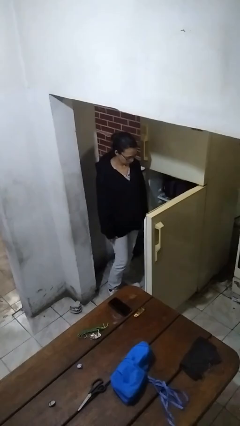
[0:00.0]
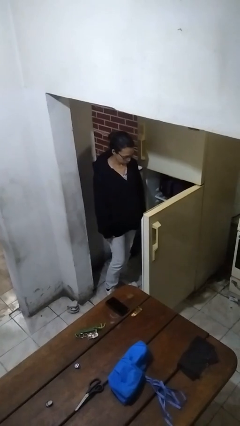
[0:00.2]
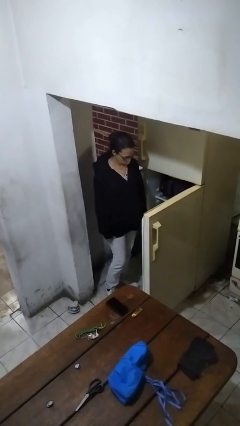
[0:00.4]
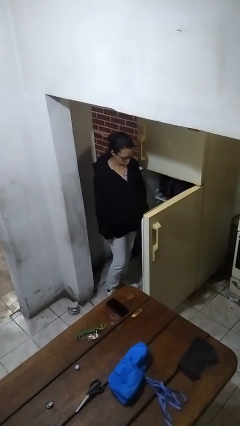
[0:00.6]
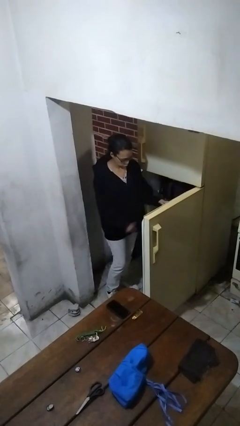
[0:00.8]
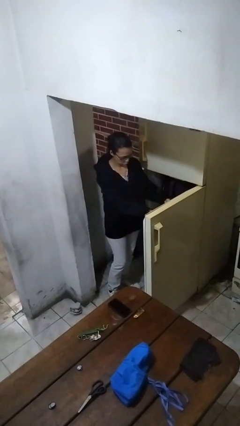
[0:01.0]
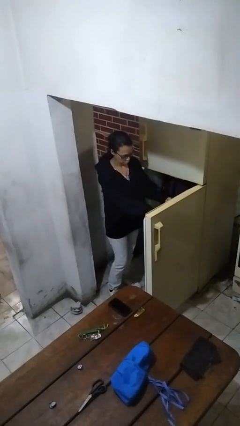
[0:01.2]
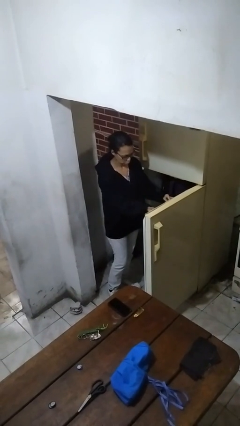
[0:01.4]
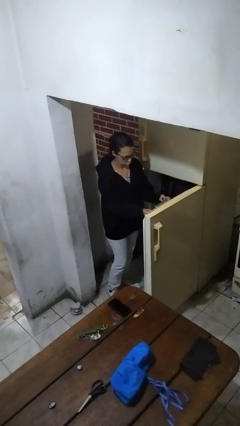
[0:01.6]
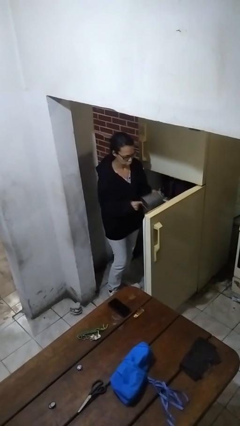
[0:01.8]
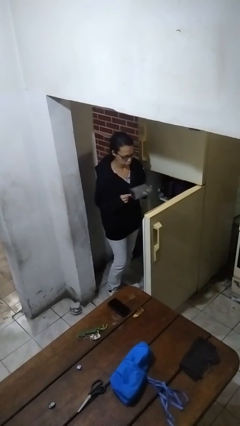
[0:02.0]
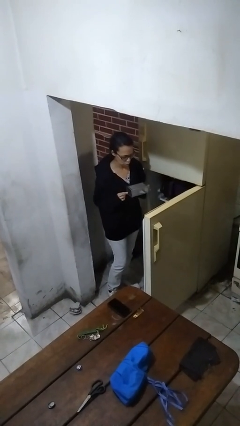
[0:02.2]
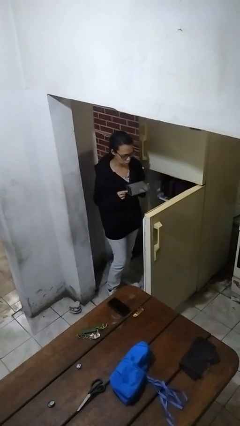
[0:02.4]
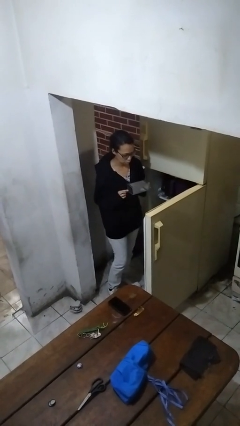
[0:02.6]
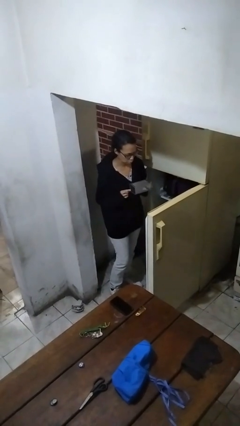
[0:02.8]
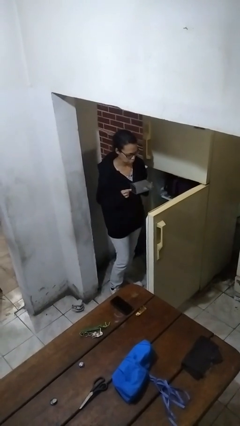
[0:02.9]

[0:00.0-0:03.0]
person takes object from refrigerator

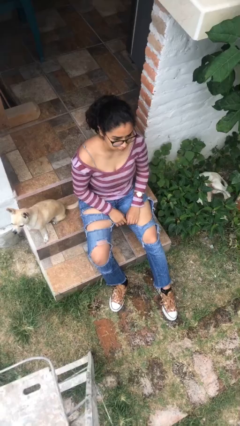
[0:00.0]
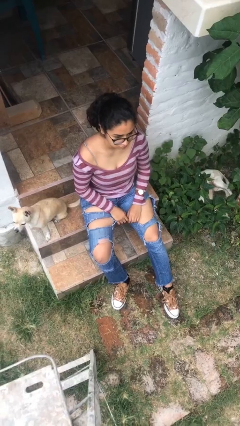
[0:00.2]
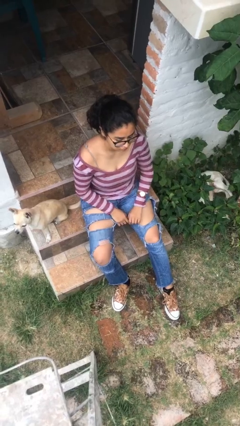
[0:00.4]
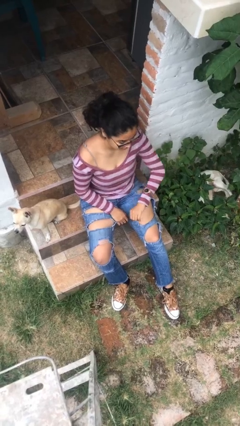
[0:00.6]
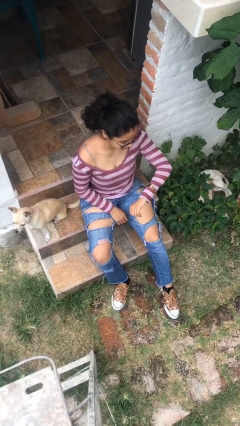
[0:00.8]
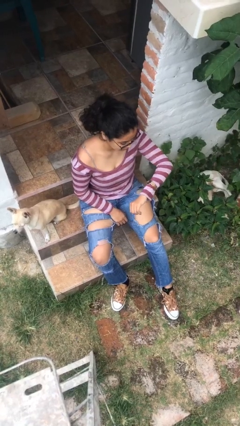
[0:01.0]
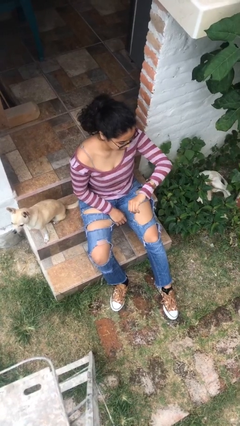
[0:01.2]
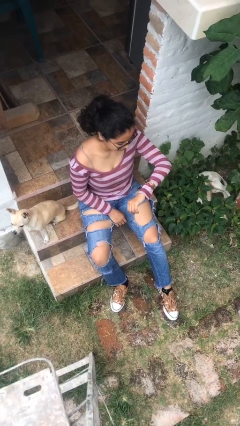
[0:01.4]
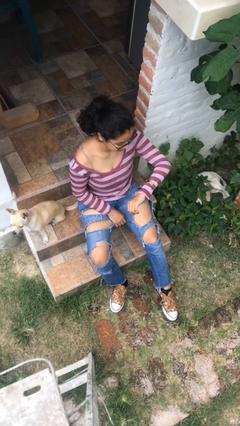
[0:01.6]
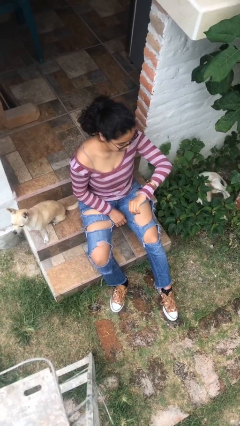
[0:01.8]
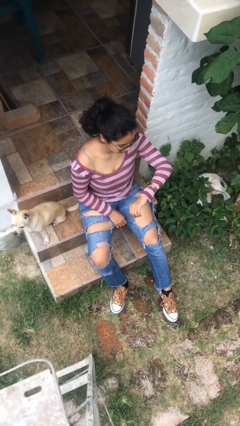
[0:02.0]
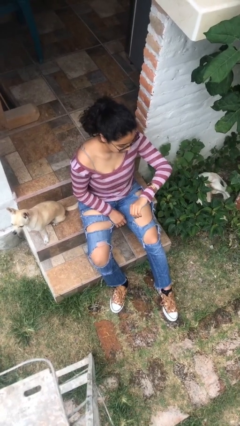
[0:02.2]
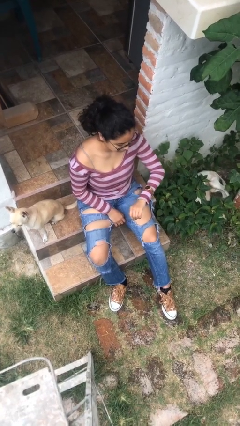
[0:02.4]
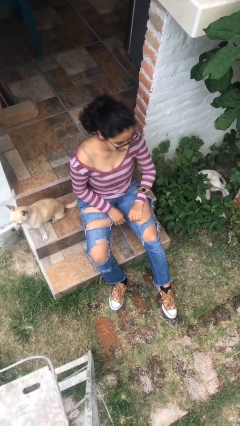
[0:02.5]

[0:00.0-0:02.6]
person looks at wristwatch

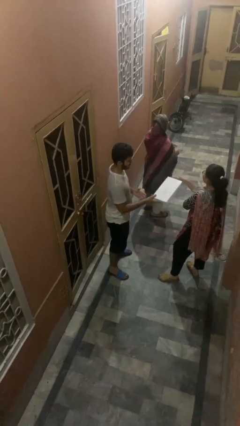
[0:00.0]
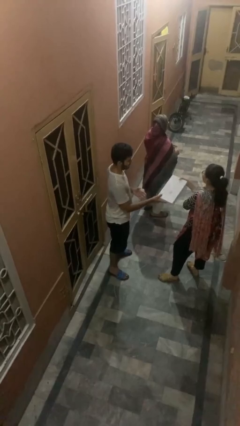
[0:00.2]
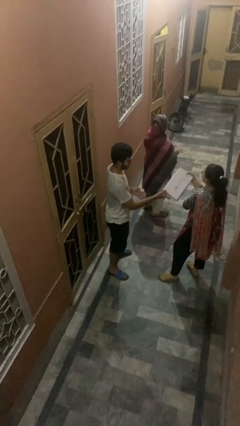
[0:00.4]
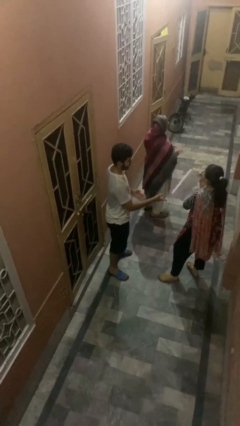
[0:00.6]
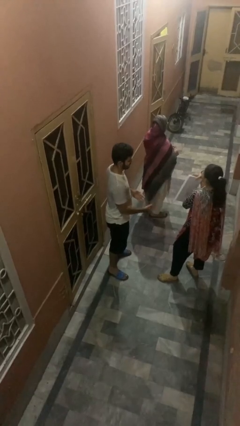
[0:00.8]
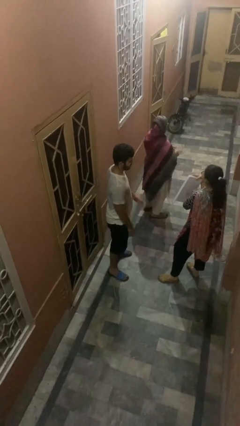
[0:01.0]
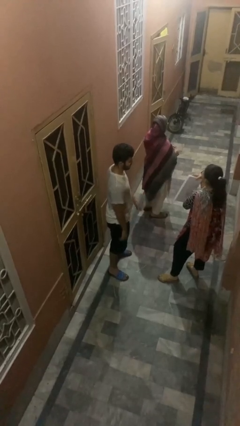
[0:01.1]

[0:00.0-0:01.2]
person transfers object to person

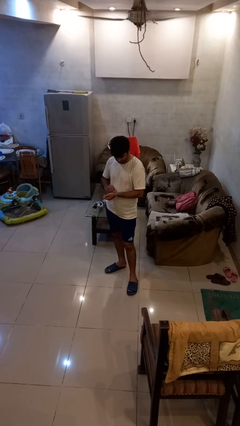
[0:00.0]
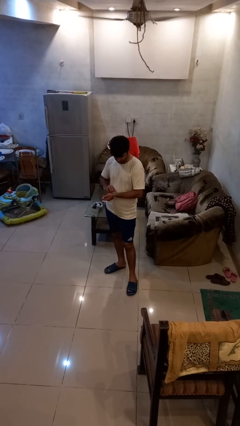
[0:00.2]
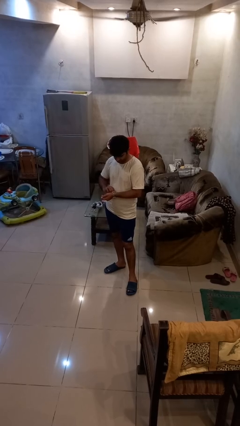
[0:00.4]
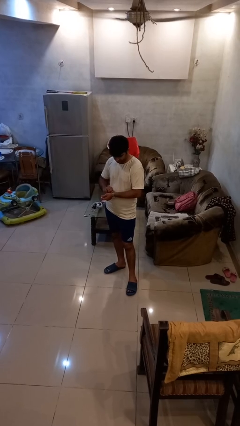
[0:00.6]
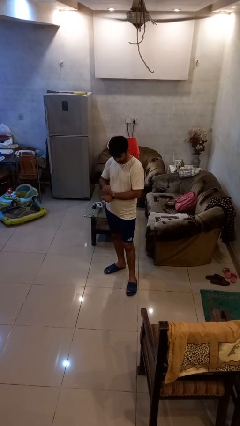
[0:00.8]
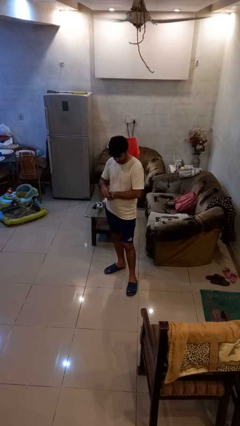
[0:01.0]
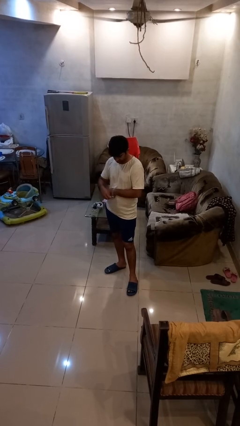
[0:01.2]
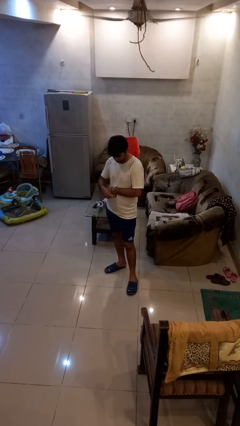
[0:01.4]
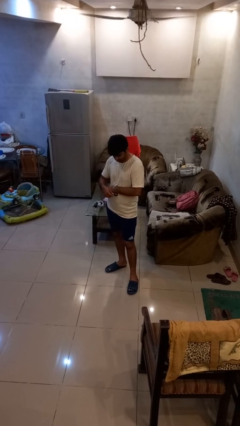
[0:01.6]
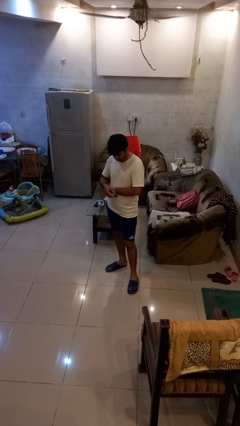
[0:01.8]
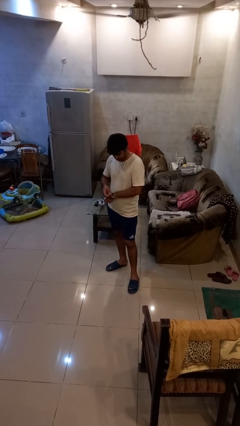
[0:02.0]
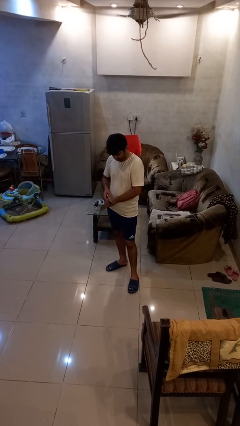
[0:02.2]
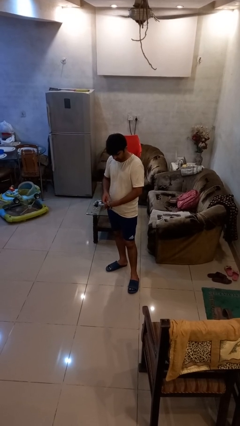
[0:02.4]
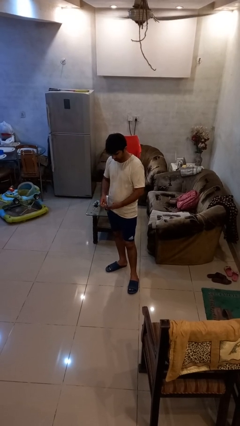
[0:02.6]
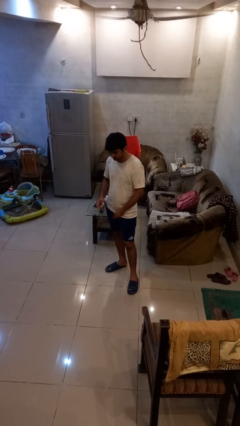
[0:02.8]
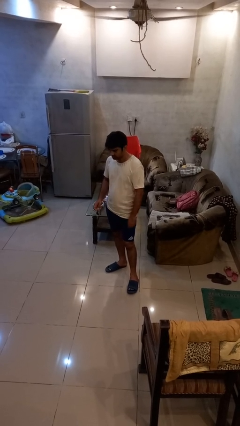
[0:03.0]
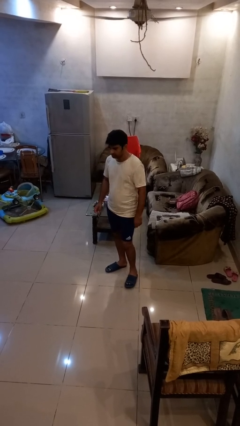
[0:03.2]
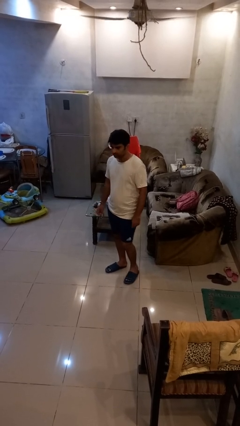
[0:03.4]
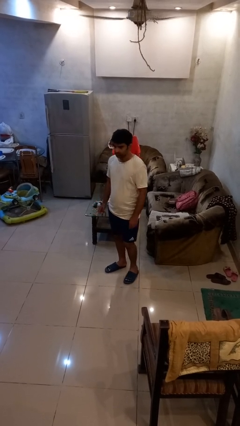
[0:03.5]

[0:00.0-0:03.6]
person takes off wristwatch

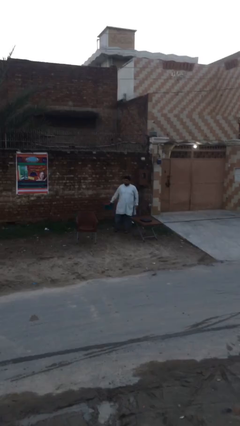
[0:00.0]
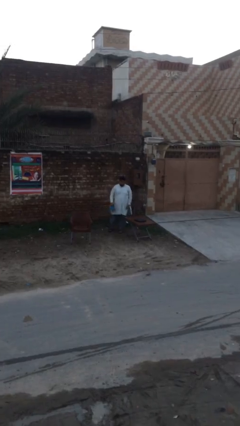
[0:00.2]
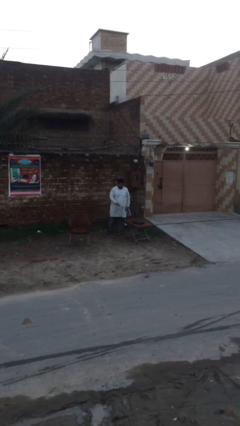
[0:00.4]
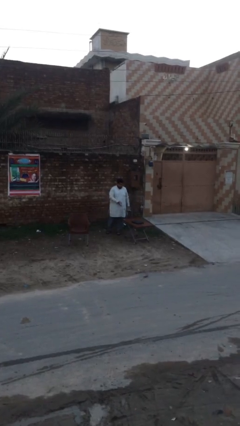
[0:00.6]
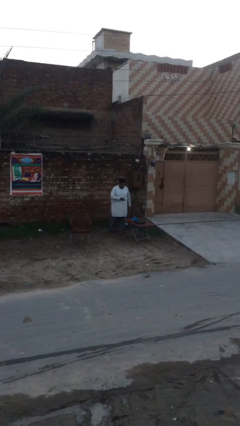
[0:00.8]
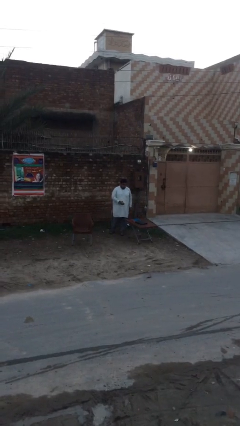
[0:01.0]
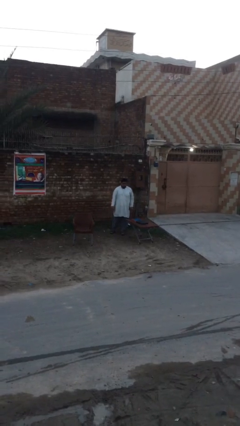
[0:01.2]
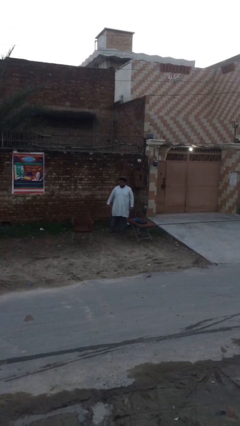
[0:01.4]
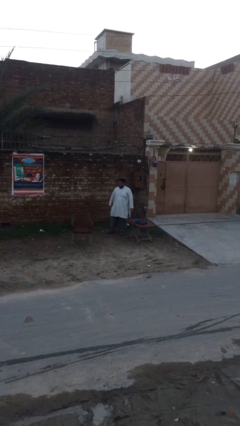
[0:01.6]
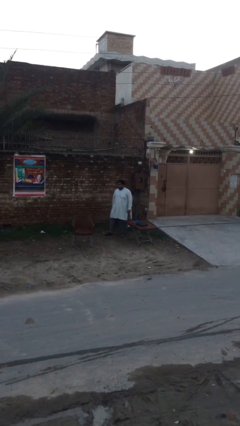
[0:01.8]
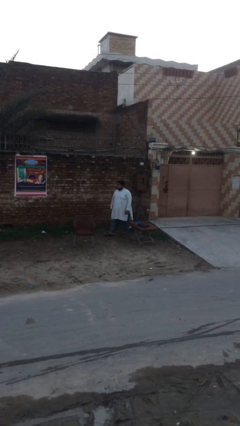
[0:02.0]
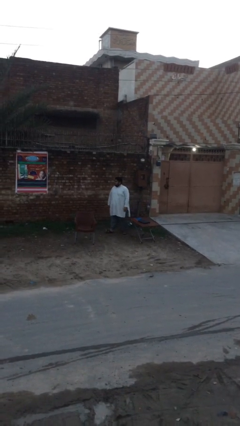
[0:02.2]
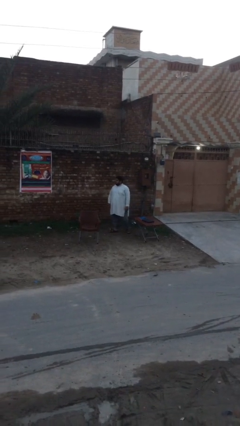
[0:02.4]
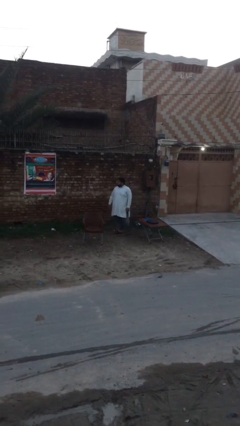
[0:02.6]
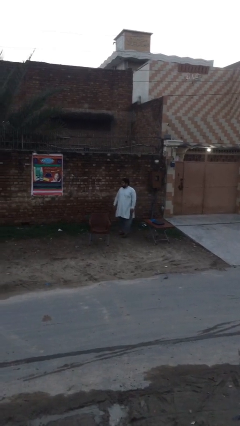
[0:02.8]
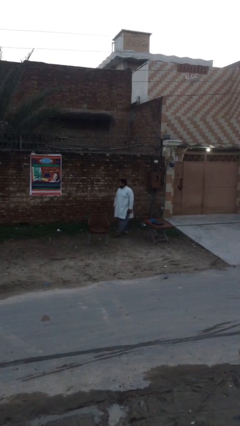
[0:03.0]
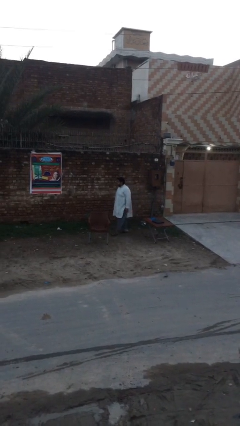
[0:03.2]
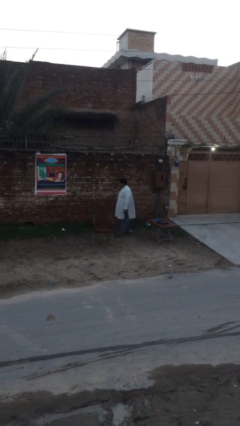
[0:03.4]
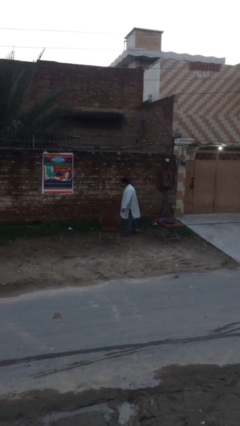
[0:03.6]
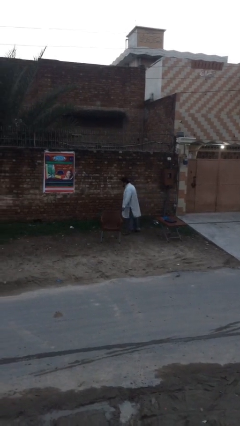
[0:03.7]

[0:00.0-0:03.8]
person puts down object on table

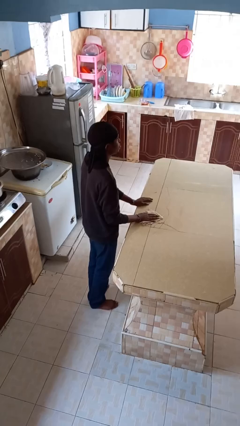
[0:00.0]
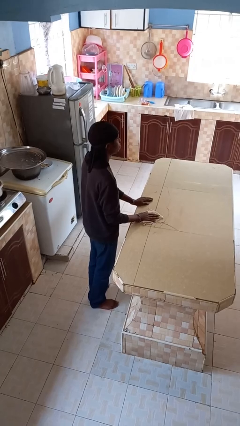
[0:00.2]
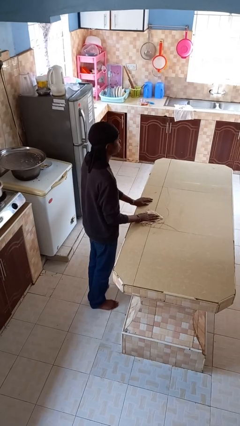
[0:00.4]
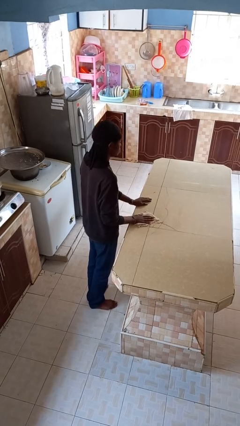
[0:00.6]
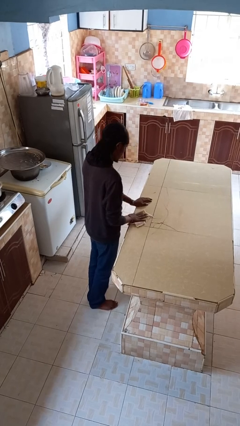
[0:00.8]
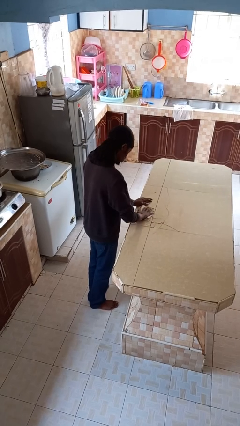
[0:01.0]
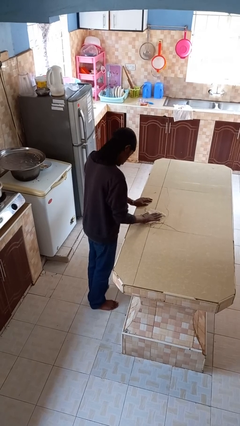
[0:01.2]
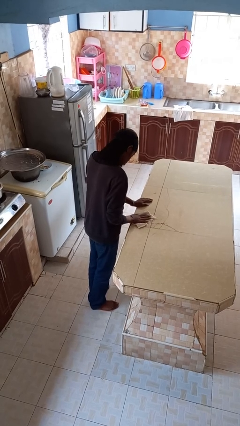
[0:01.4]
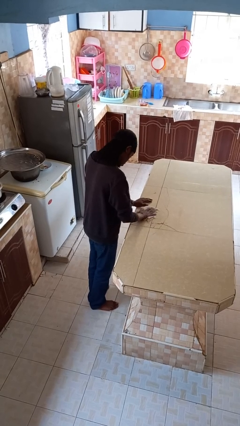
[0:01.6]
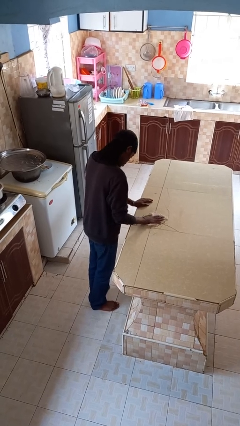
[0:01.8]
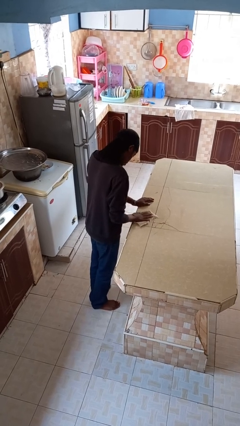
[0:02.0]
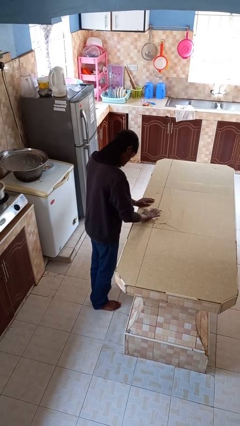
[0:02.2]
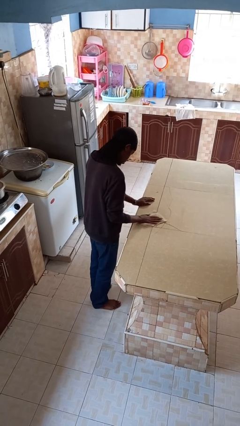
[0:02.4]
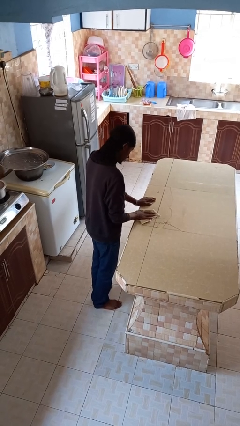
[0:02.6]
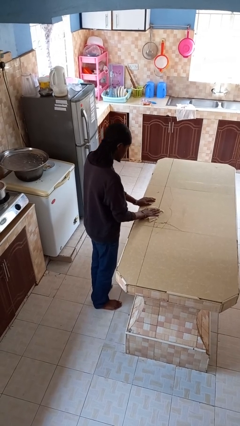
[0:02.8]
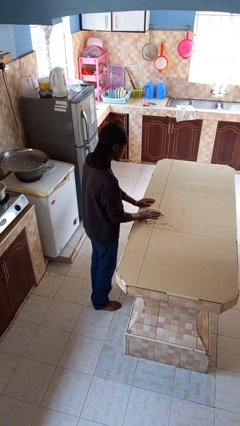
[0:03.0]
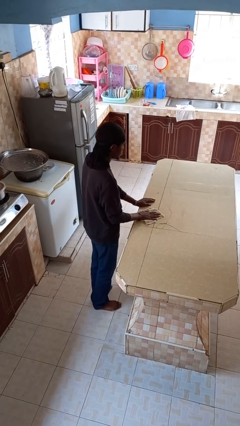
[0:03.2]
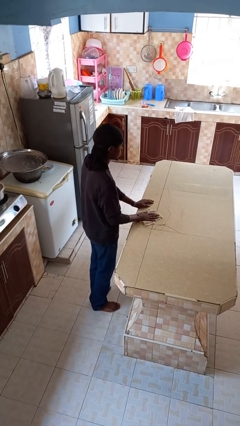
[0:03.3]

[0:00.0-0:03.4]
person cleans table with rag
